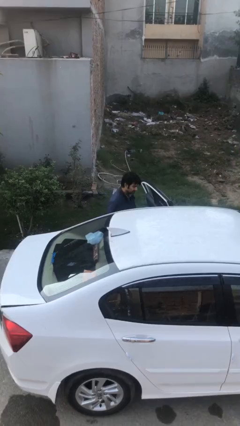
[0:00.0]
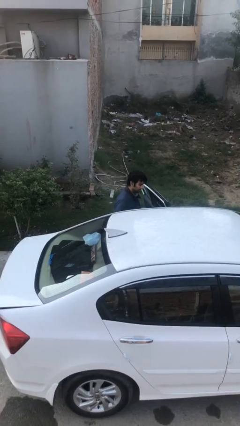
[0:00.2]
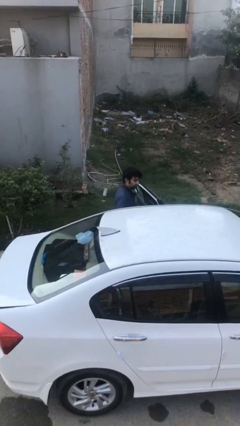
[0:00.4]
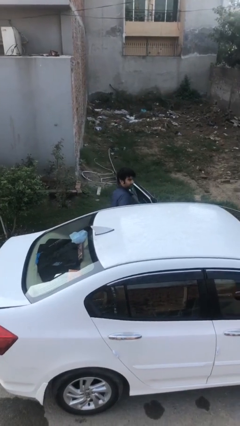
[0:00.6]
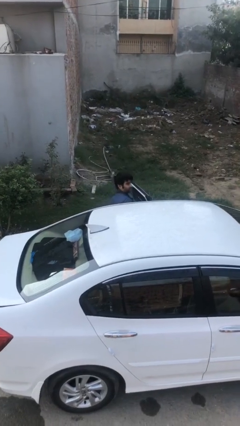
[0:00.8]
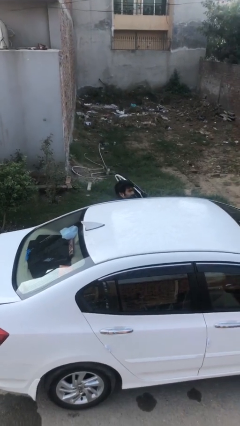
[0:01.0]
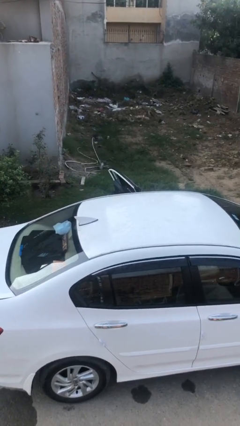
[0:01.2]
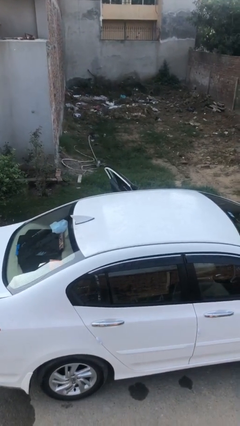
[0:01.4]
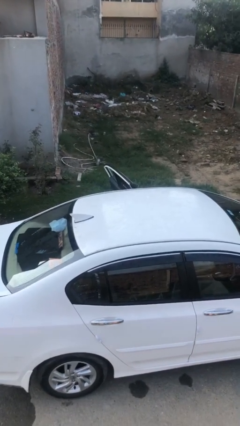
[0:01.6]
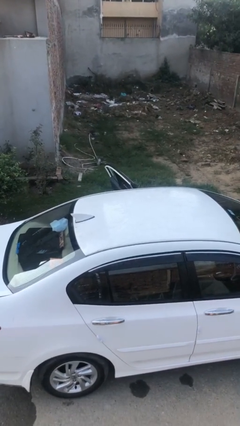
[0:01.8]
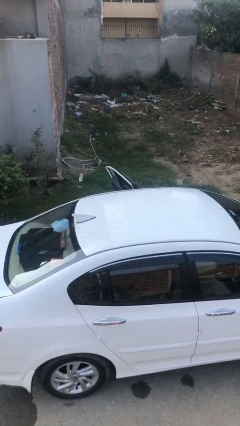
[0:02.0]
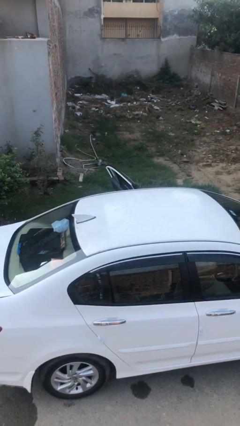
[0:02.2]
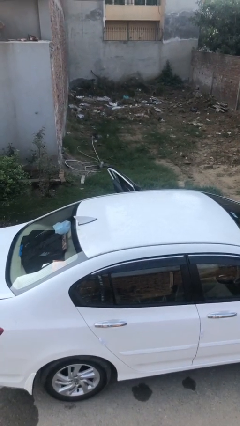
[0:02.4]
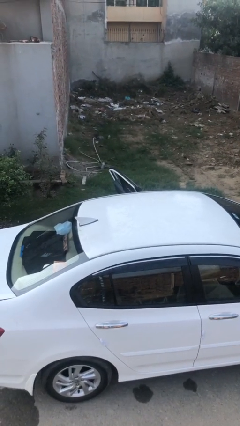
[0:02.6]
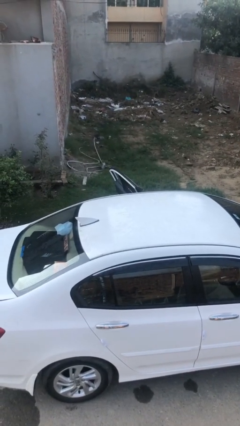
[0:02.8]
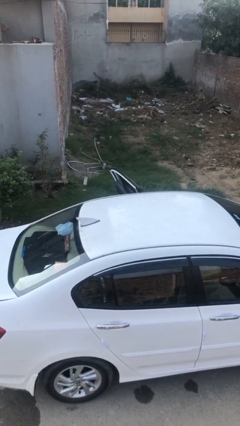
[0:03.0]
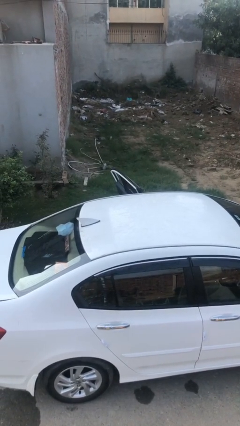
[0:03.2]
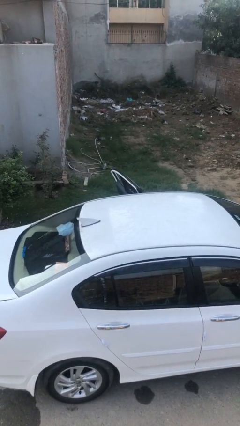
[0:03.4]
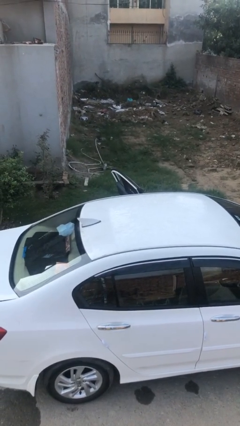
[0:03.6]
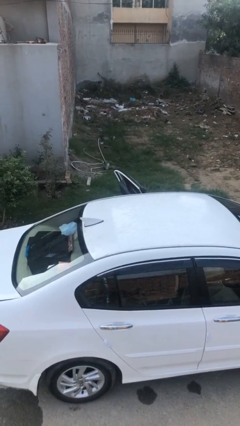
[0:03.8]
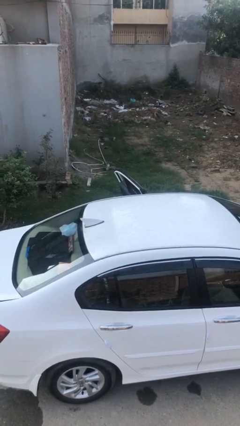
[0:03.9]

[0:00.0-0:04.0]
person enters car

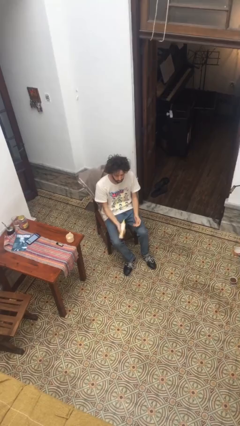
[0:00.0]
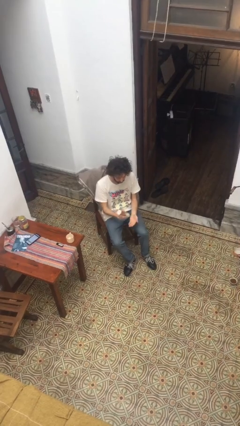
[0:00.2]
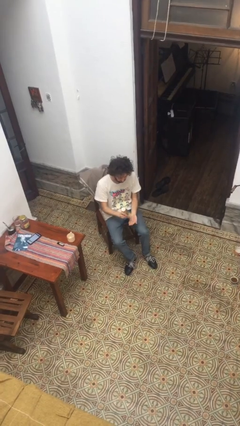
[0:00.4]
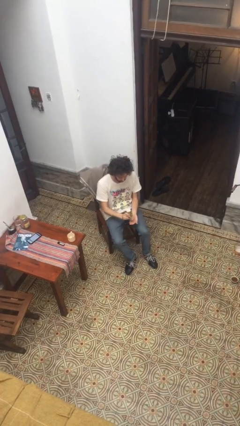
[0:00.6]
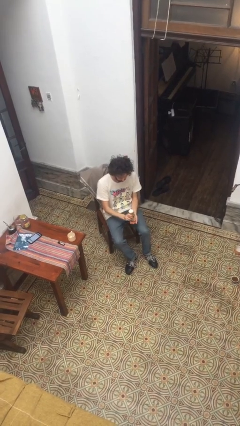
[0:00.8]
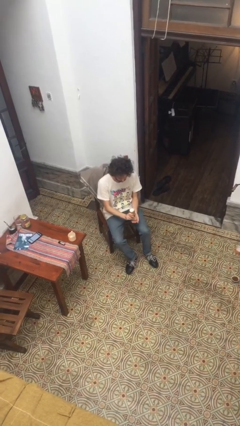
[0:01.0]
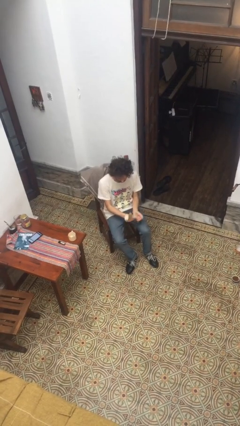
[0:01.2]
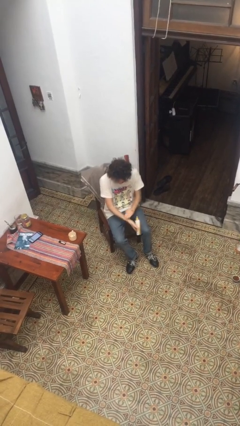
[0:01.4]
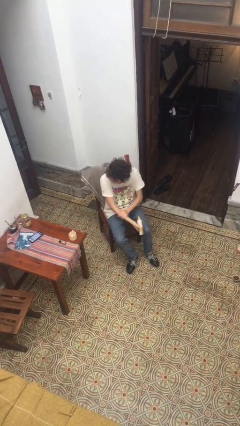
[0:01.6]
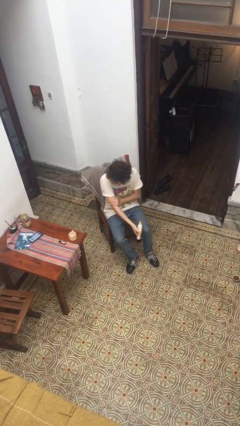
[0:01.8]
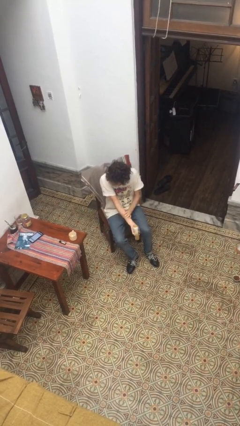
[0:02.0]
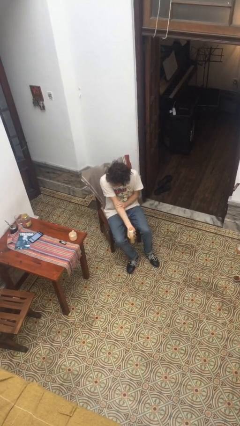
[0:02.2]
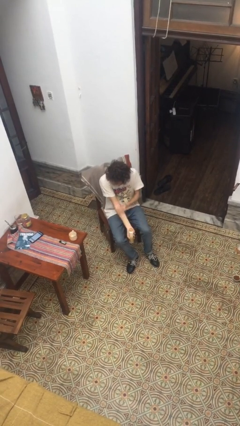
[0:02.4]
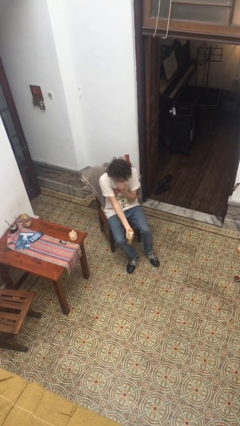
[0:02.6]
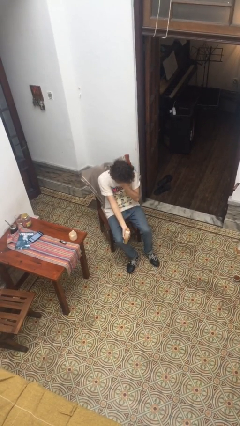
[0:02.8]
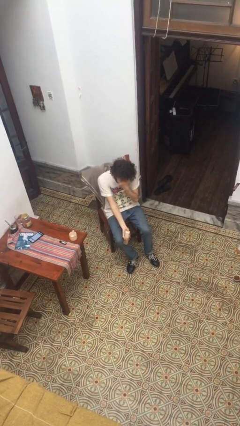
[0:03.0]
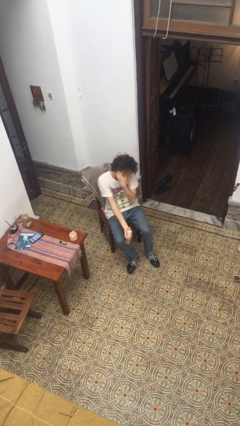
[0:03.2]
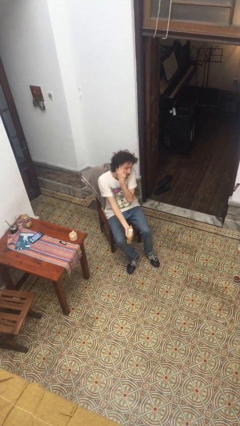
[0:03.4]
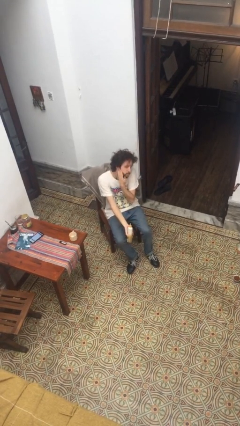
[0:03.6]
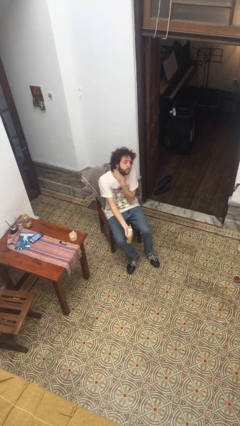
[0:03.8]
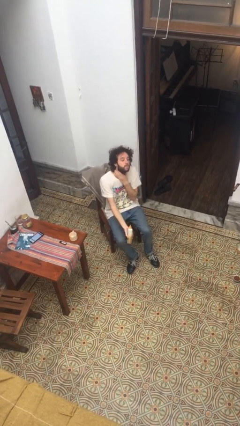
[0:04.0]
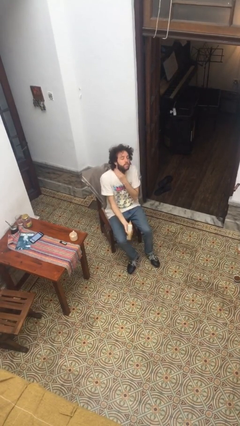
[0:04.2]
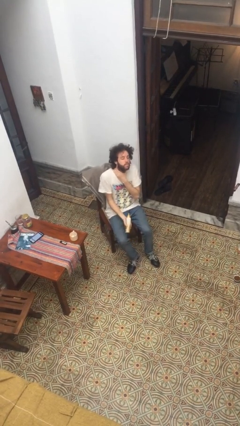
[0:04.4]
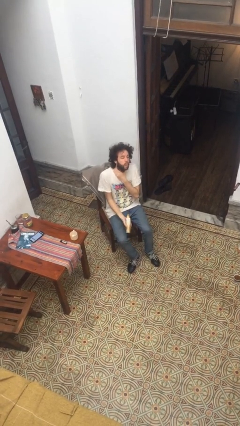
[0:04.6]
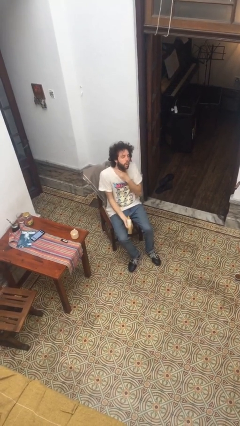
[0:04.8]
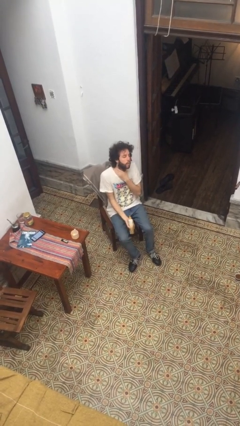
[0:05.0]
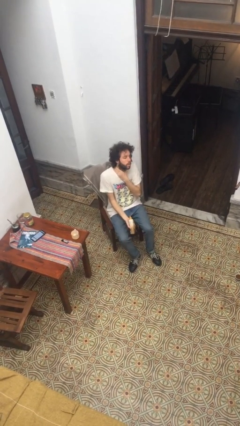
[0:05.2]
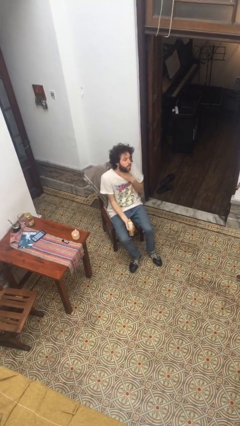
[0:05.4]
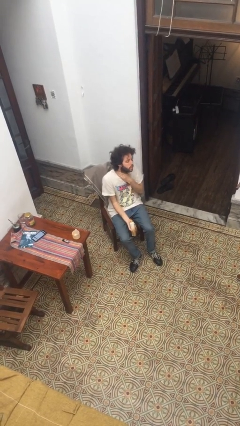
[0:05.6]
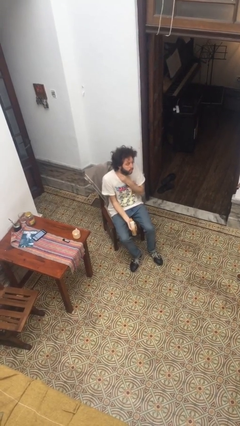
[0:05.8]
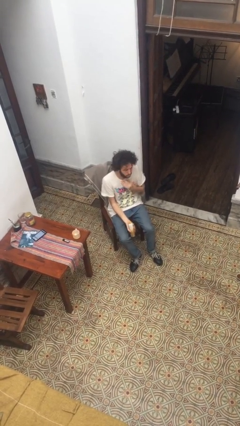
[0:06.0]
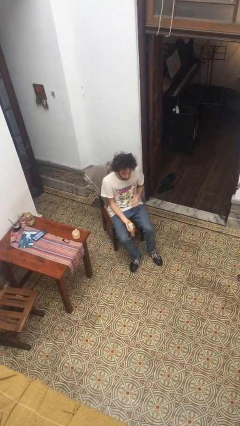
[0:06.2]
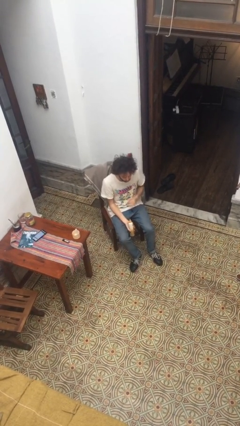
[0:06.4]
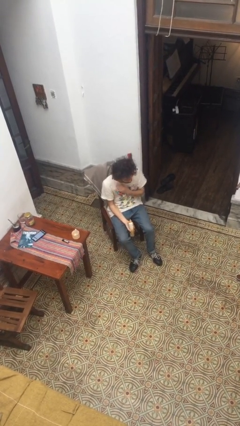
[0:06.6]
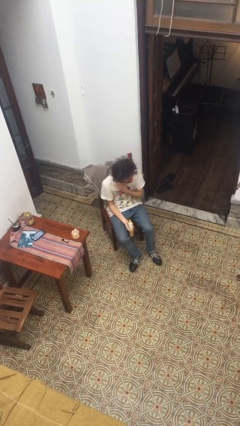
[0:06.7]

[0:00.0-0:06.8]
person applies sunscreen

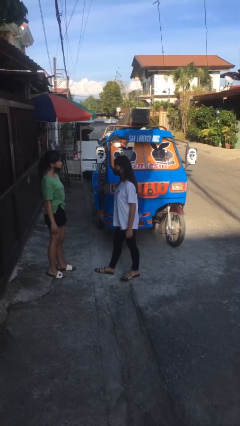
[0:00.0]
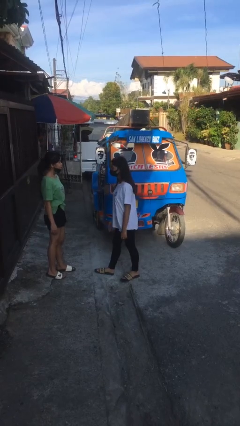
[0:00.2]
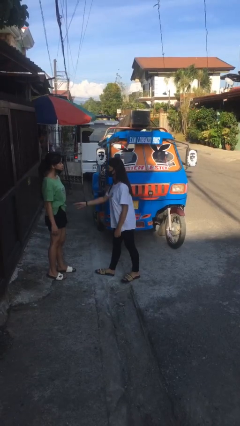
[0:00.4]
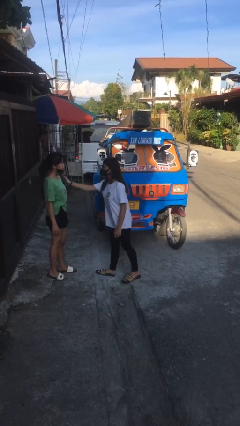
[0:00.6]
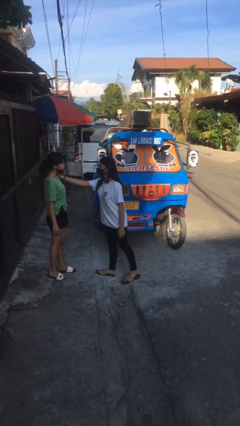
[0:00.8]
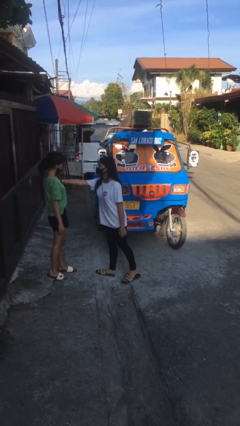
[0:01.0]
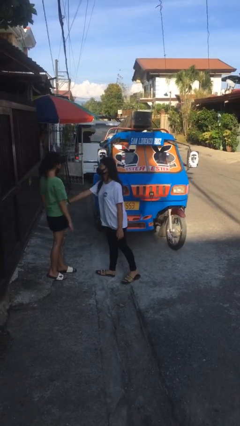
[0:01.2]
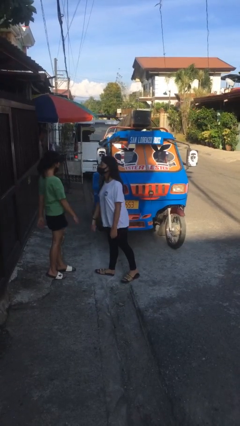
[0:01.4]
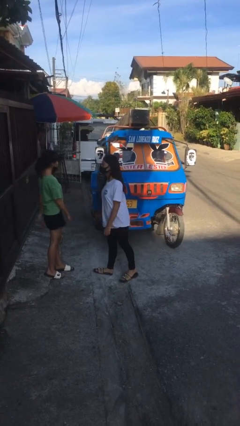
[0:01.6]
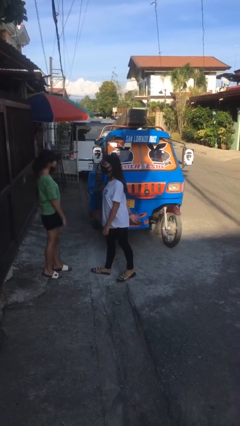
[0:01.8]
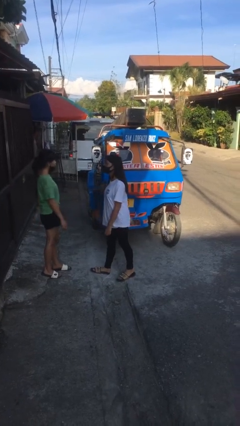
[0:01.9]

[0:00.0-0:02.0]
person shoves person

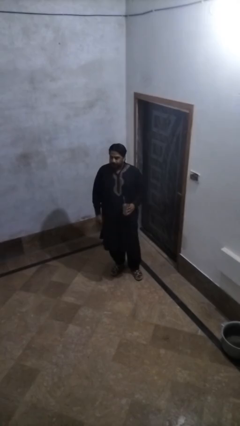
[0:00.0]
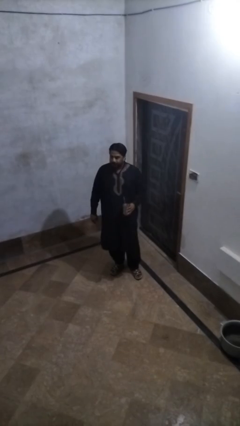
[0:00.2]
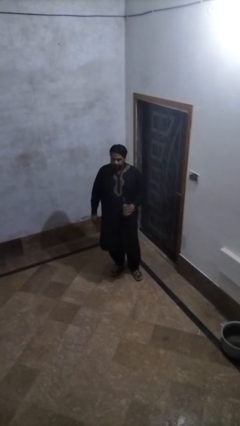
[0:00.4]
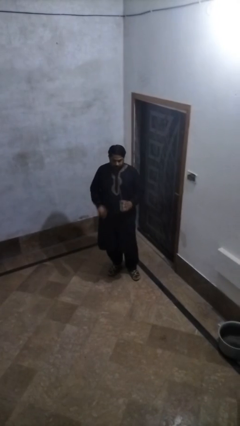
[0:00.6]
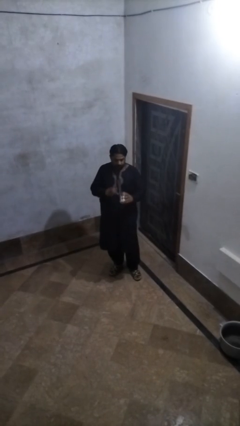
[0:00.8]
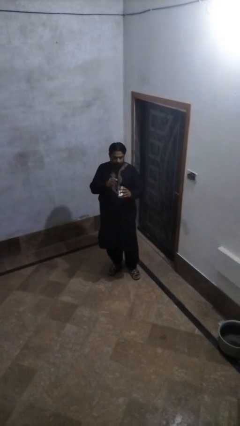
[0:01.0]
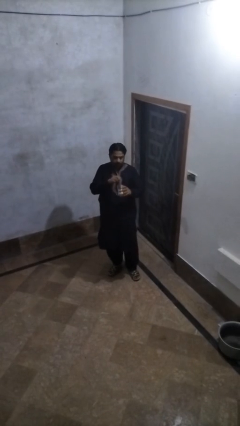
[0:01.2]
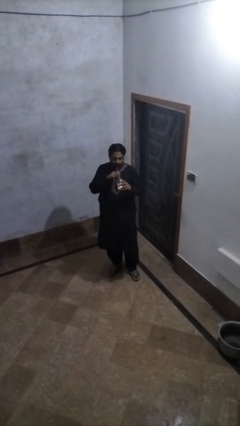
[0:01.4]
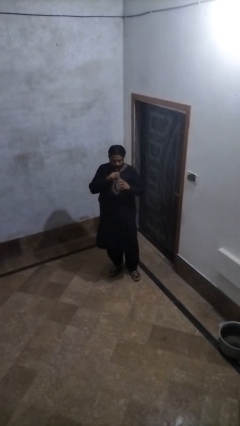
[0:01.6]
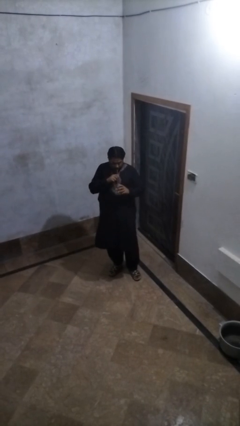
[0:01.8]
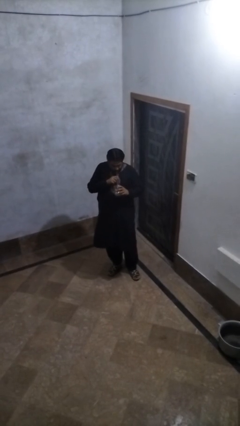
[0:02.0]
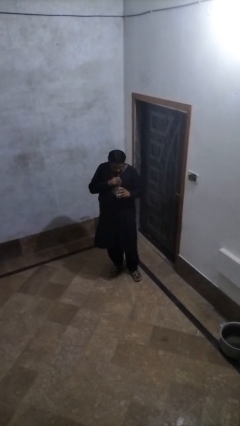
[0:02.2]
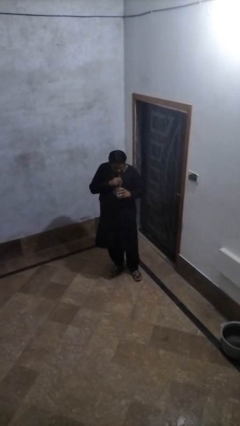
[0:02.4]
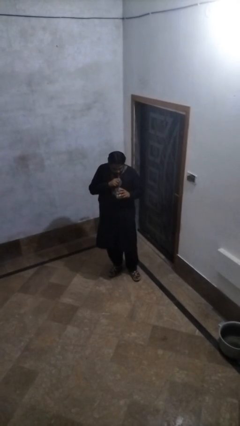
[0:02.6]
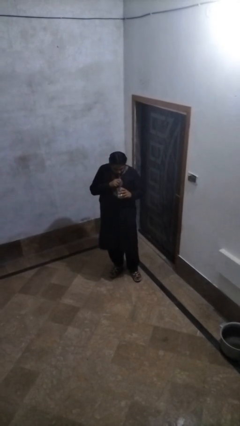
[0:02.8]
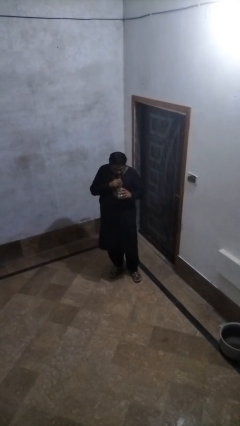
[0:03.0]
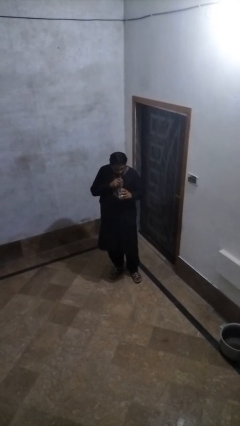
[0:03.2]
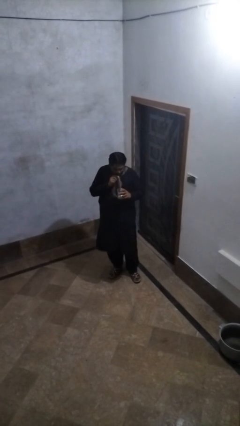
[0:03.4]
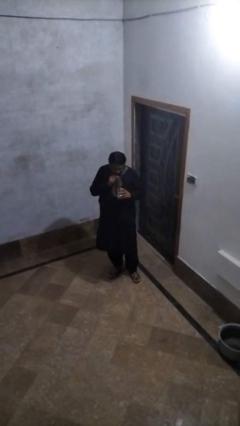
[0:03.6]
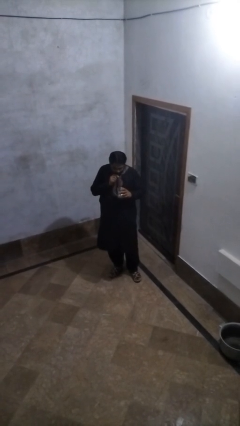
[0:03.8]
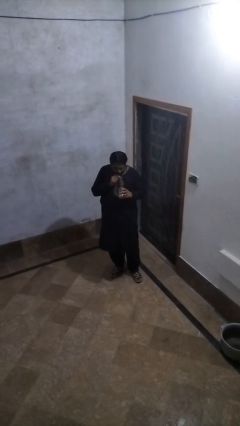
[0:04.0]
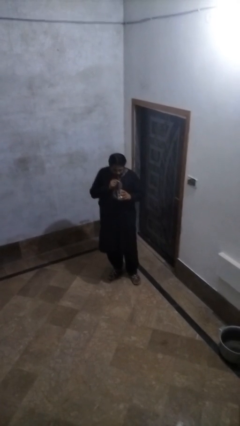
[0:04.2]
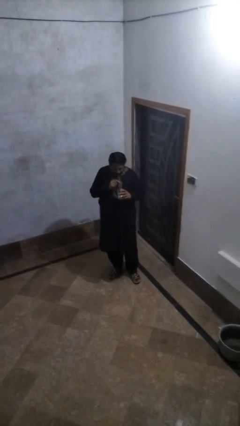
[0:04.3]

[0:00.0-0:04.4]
person drinks from straw

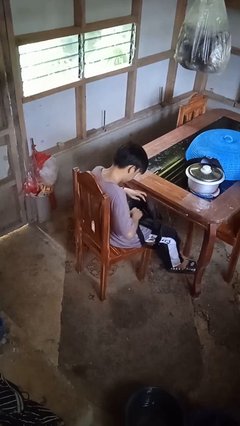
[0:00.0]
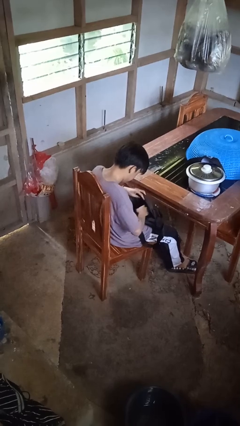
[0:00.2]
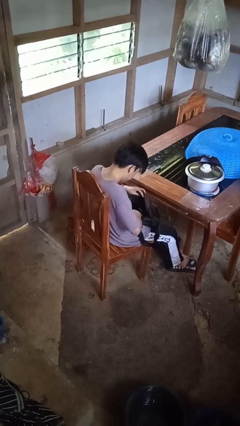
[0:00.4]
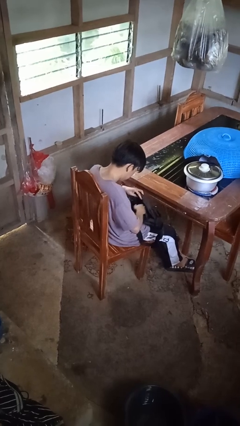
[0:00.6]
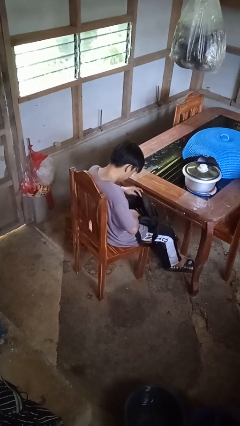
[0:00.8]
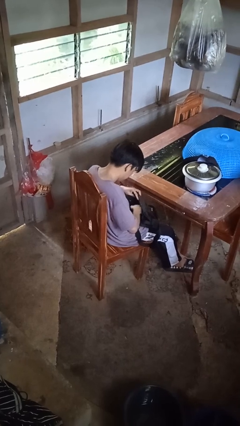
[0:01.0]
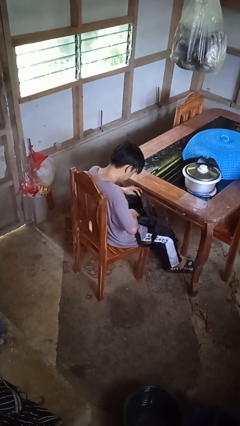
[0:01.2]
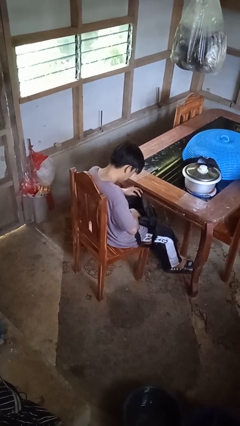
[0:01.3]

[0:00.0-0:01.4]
person searches in purse
